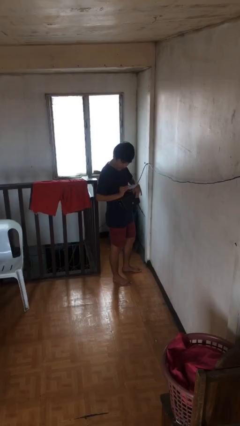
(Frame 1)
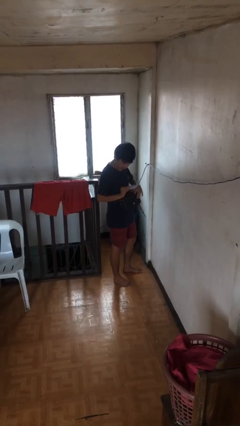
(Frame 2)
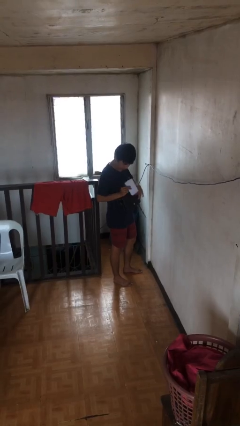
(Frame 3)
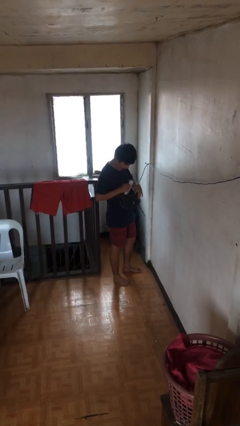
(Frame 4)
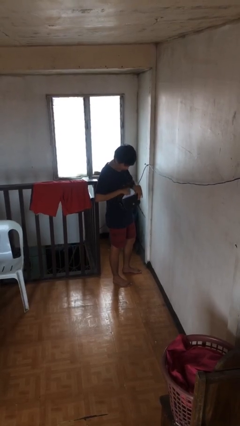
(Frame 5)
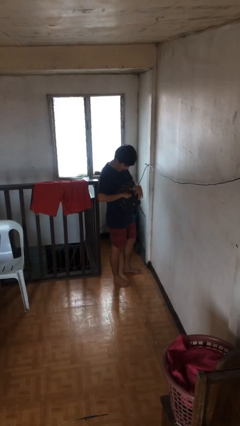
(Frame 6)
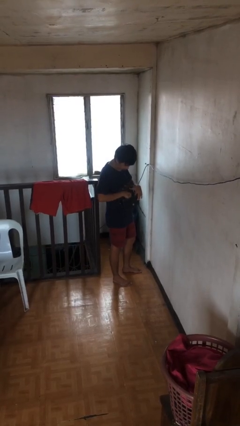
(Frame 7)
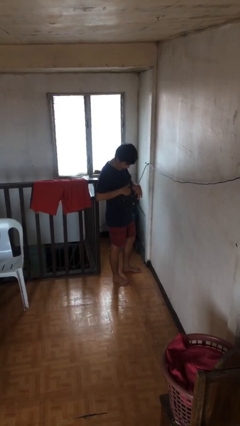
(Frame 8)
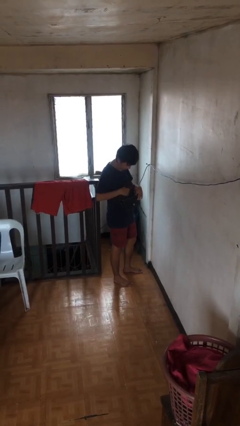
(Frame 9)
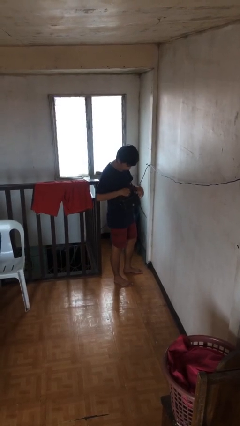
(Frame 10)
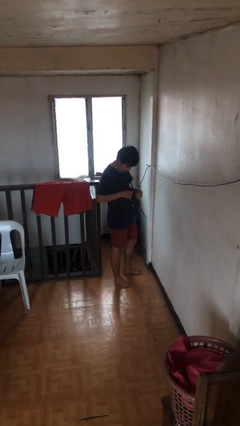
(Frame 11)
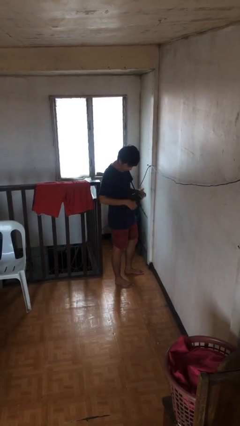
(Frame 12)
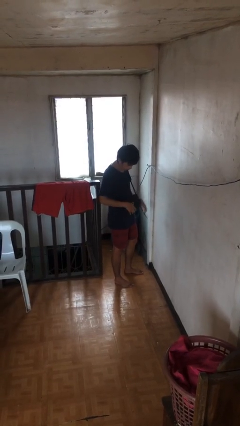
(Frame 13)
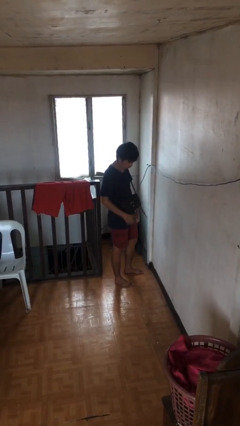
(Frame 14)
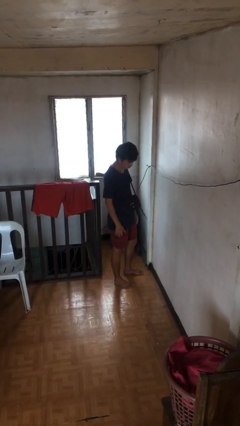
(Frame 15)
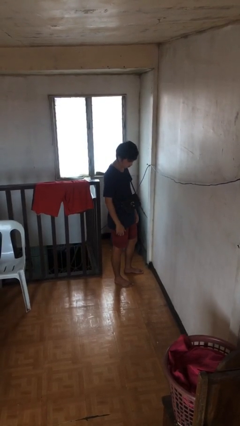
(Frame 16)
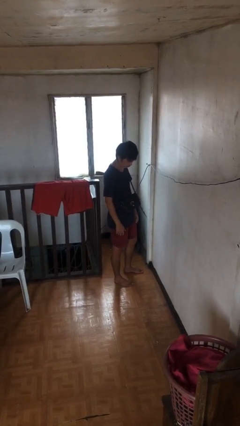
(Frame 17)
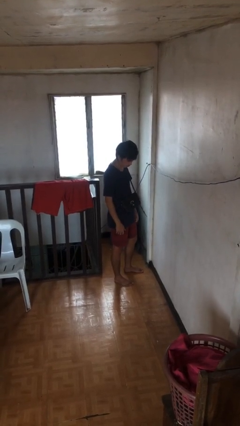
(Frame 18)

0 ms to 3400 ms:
person puts object into purse

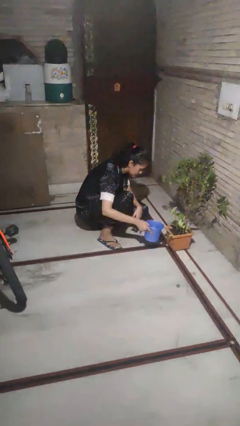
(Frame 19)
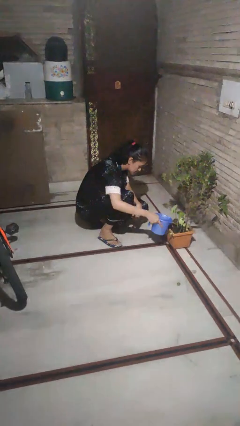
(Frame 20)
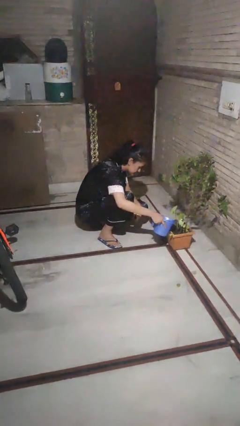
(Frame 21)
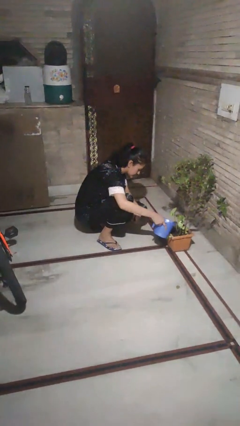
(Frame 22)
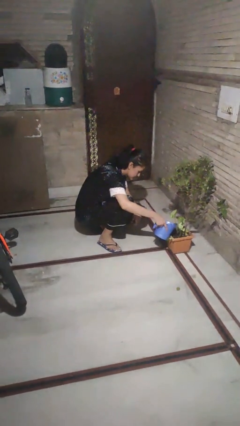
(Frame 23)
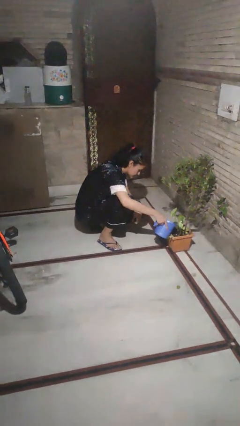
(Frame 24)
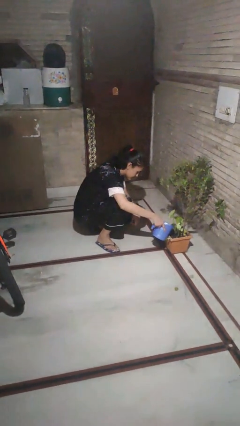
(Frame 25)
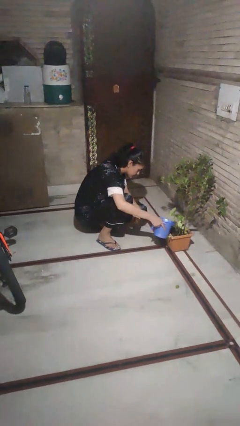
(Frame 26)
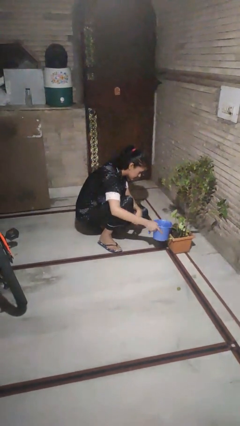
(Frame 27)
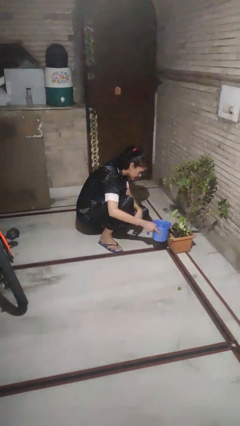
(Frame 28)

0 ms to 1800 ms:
person waters houseplant

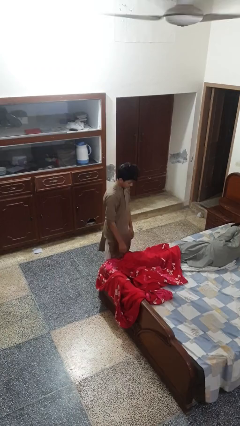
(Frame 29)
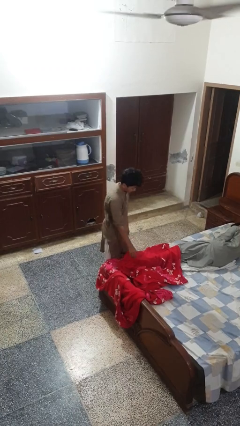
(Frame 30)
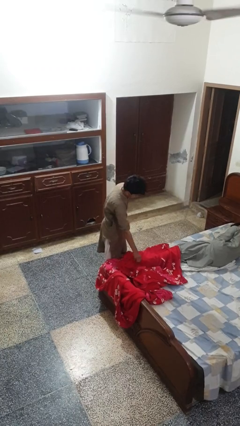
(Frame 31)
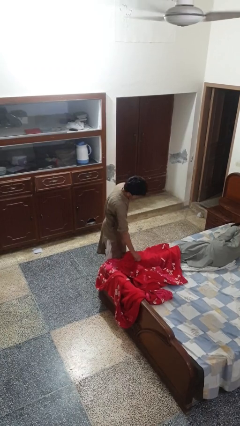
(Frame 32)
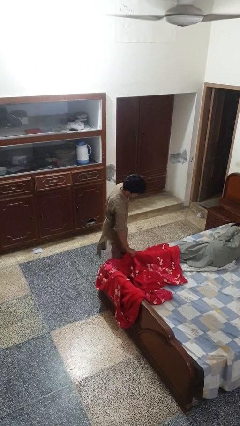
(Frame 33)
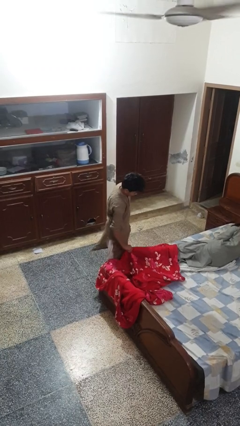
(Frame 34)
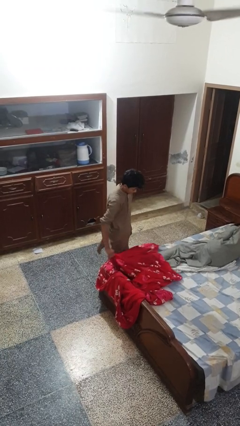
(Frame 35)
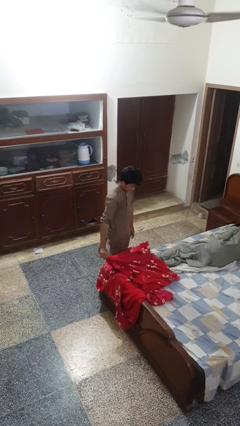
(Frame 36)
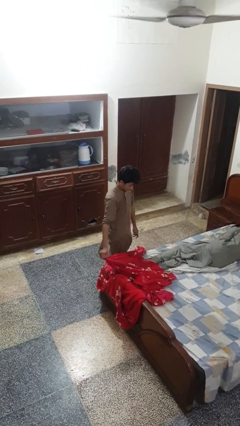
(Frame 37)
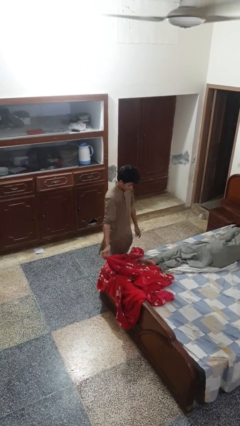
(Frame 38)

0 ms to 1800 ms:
person uncovers friend with blanket

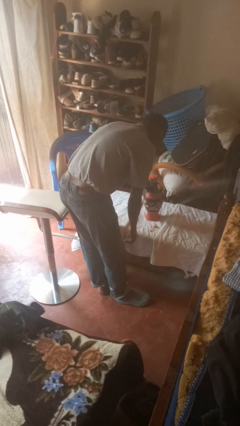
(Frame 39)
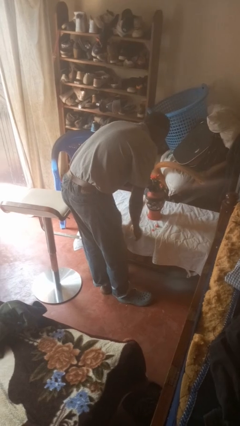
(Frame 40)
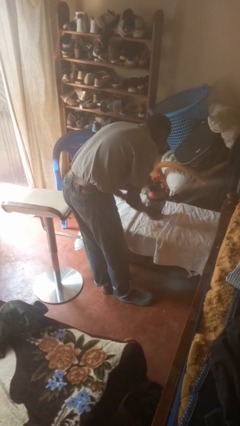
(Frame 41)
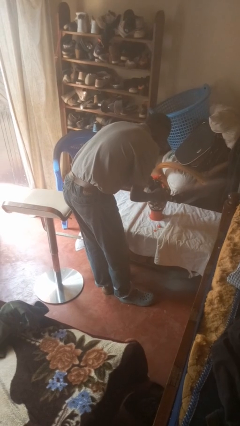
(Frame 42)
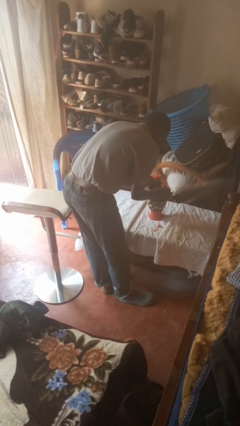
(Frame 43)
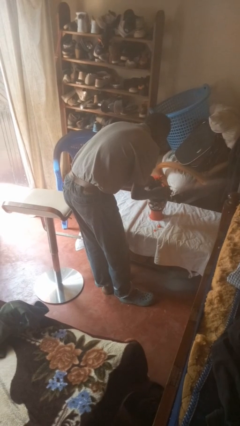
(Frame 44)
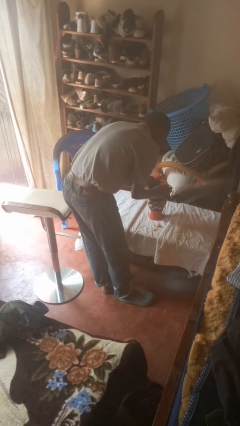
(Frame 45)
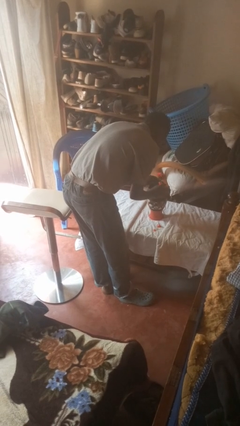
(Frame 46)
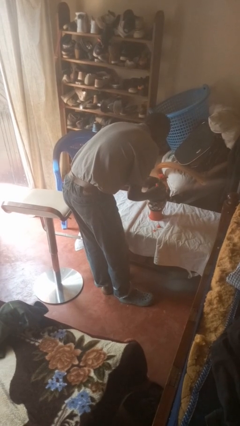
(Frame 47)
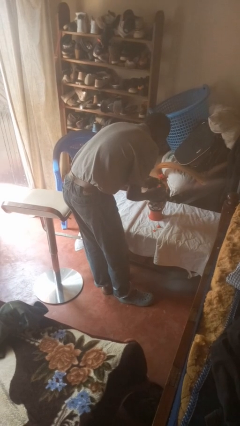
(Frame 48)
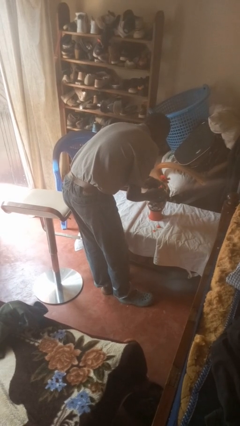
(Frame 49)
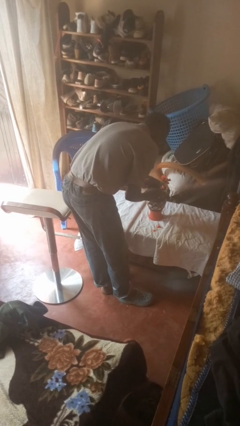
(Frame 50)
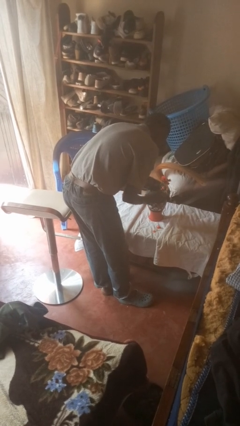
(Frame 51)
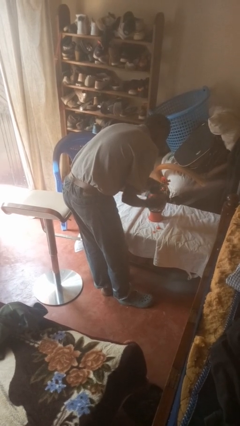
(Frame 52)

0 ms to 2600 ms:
person arranges flowers in vase

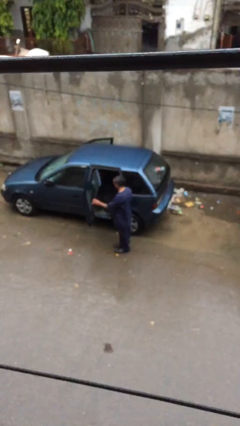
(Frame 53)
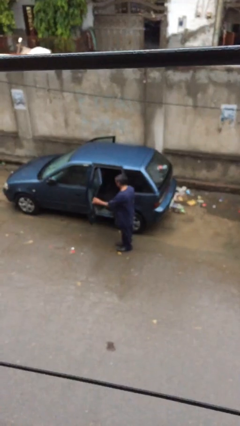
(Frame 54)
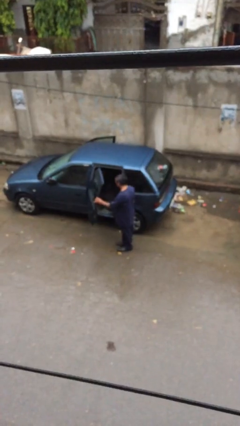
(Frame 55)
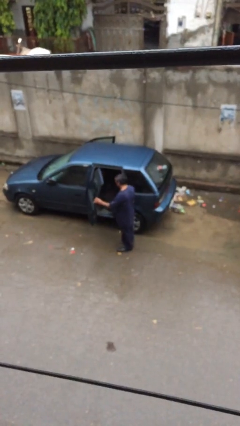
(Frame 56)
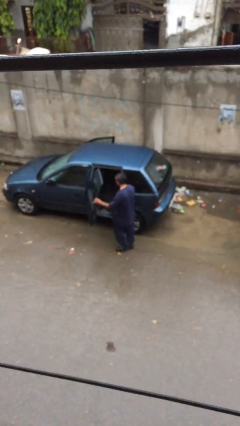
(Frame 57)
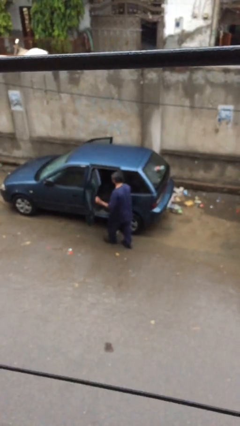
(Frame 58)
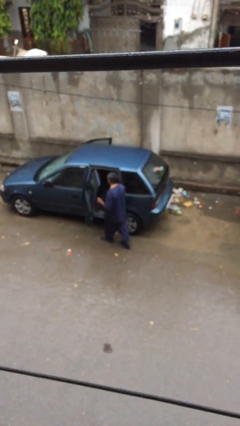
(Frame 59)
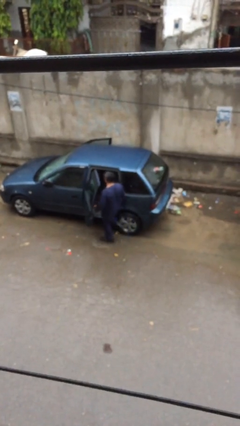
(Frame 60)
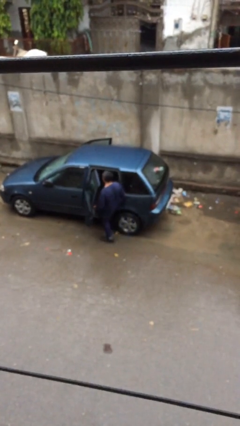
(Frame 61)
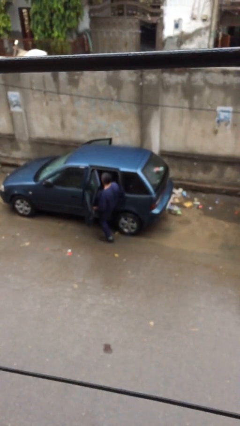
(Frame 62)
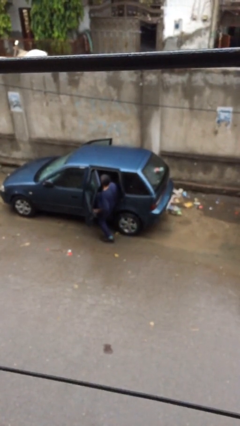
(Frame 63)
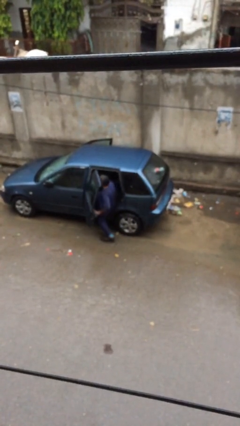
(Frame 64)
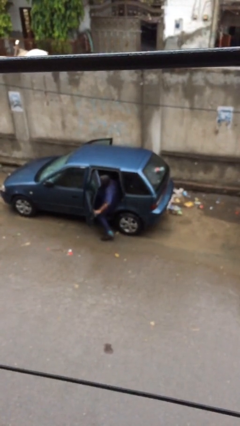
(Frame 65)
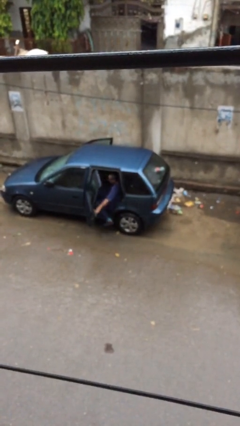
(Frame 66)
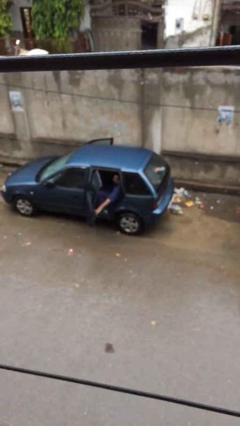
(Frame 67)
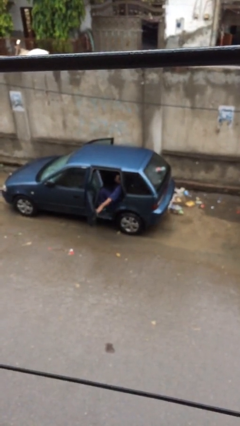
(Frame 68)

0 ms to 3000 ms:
person enters car

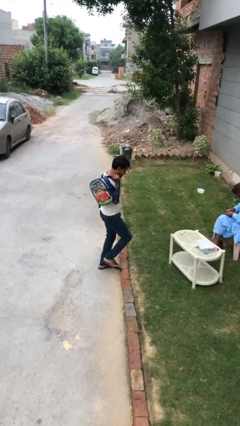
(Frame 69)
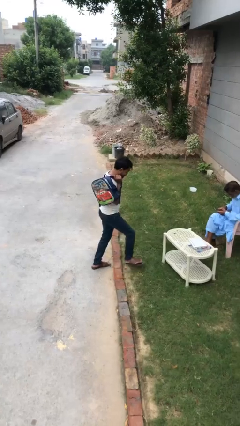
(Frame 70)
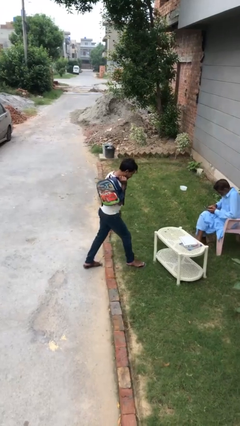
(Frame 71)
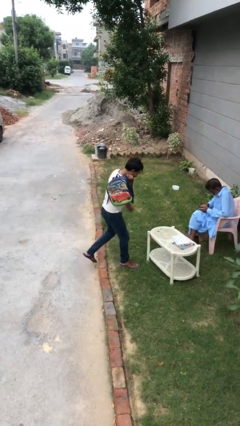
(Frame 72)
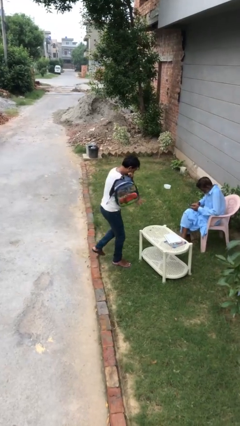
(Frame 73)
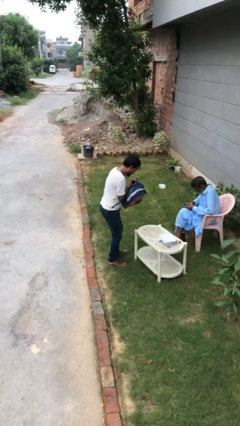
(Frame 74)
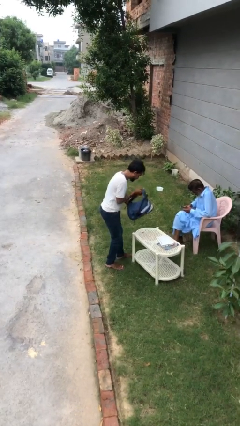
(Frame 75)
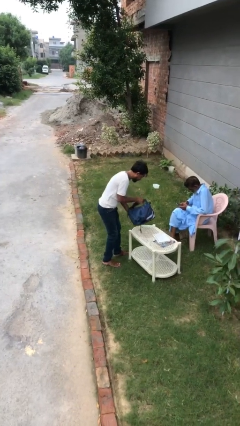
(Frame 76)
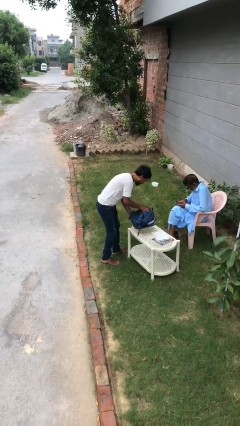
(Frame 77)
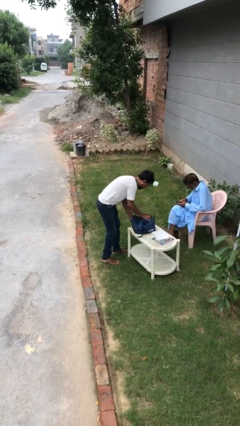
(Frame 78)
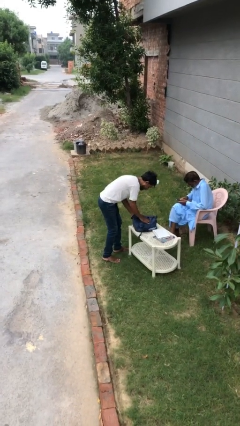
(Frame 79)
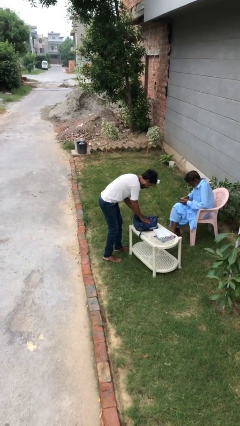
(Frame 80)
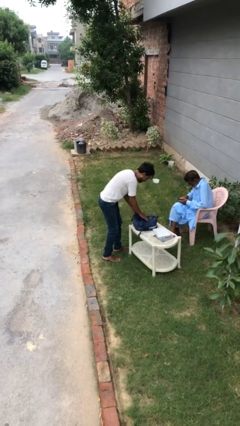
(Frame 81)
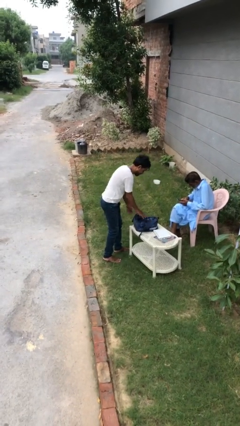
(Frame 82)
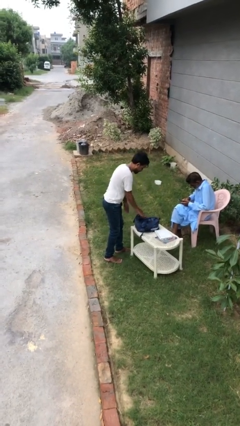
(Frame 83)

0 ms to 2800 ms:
person puts down object on table

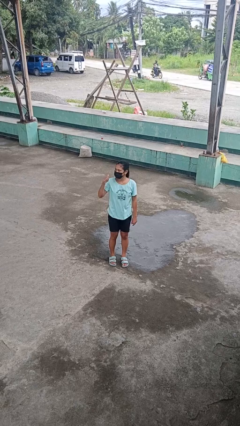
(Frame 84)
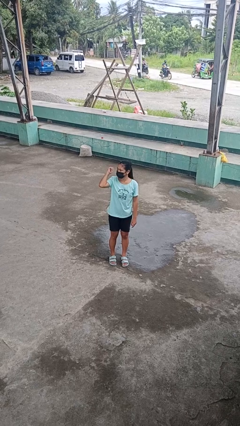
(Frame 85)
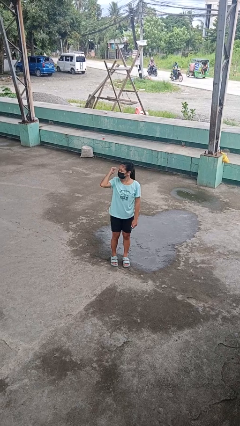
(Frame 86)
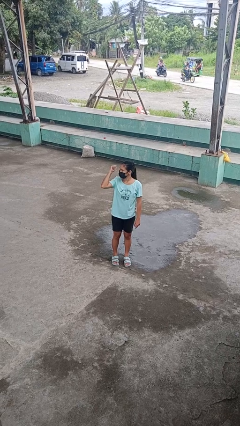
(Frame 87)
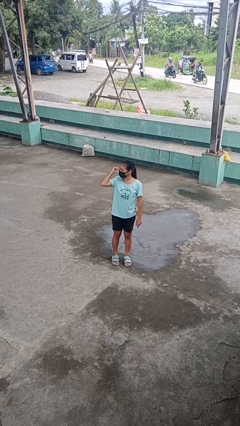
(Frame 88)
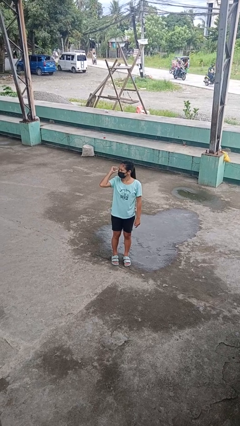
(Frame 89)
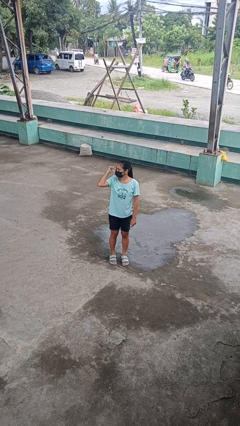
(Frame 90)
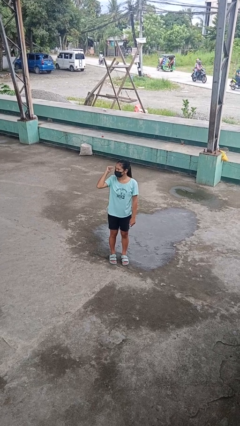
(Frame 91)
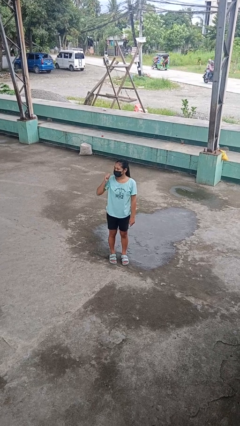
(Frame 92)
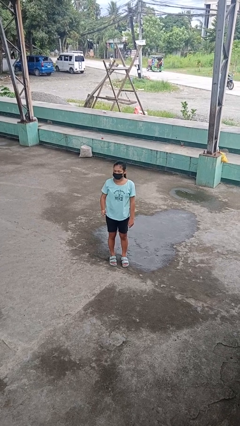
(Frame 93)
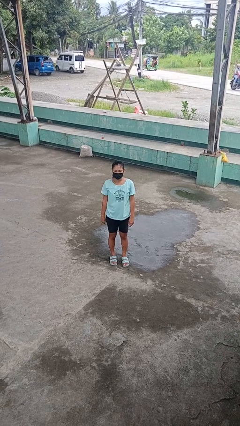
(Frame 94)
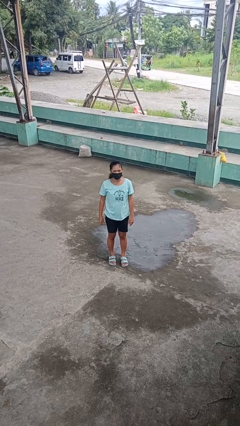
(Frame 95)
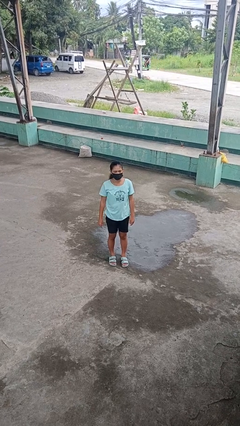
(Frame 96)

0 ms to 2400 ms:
person gestures behind me
